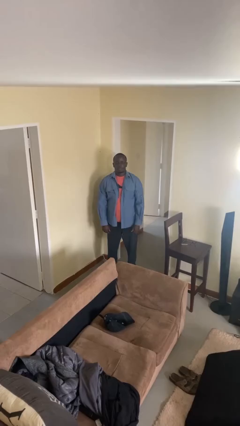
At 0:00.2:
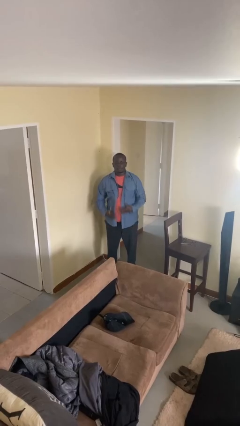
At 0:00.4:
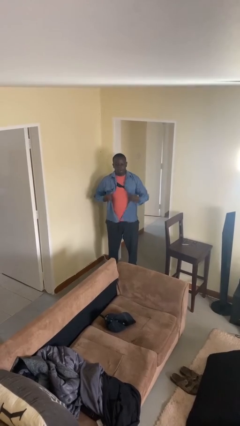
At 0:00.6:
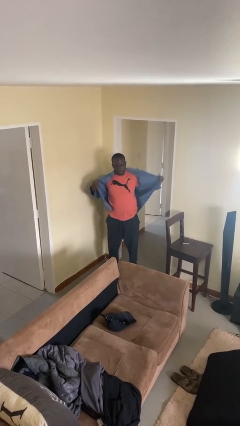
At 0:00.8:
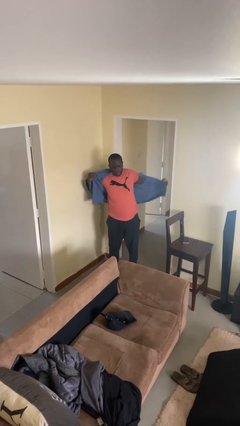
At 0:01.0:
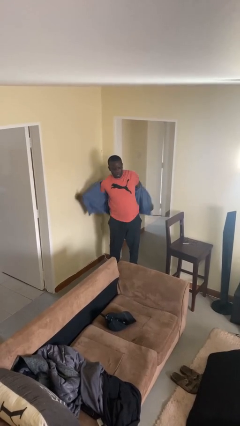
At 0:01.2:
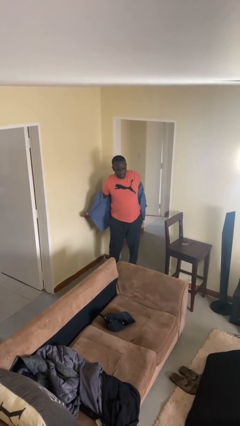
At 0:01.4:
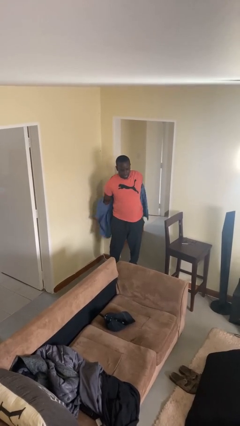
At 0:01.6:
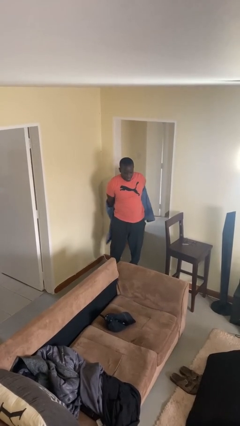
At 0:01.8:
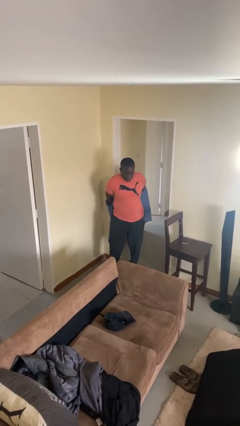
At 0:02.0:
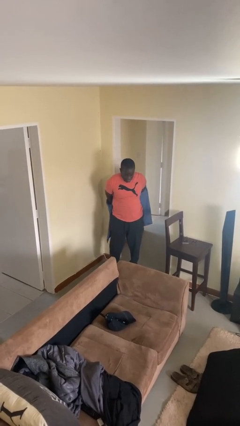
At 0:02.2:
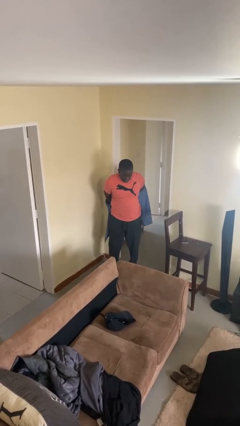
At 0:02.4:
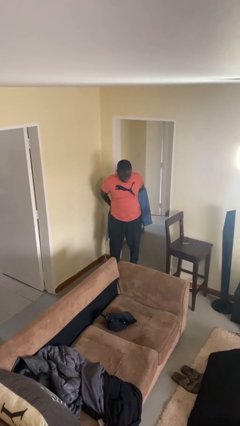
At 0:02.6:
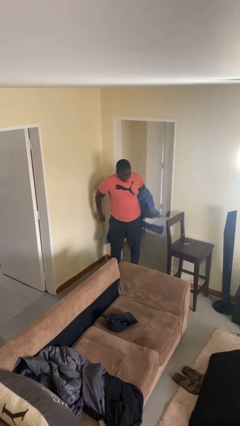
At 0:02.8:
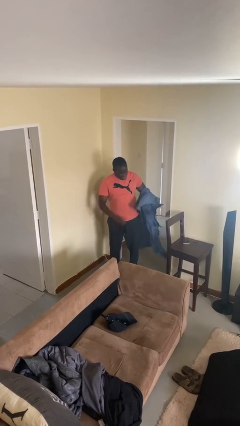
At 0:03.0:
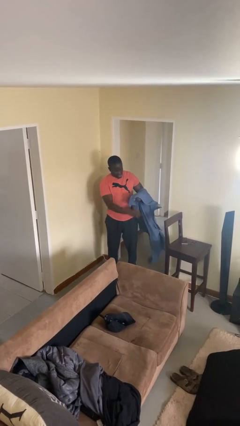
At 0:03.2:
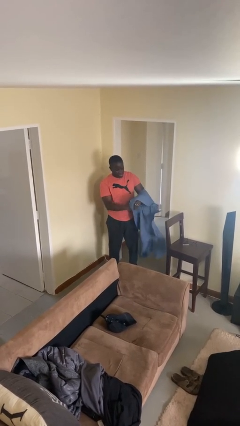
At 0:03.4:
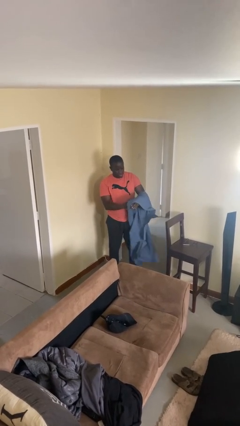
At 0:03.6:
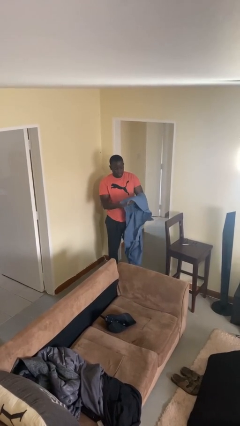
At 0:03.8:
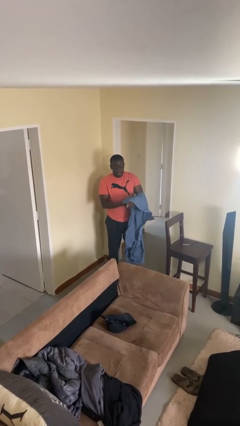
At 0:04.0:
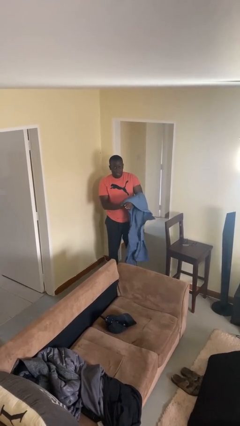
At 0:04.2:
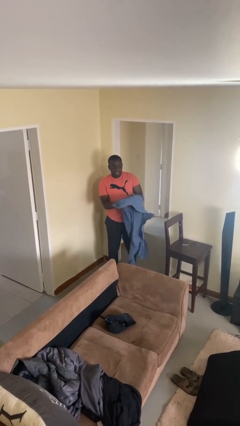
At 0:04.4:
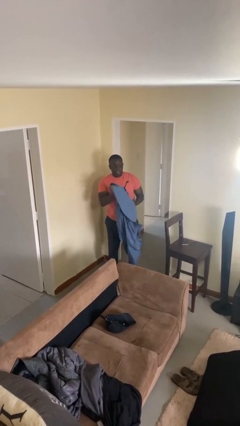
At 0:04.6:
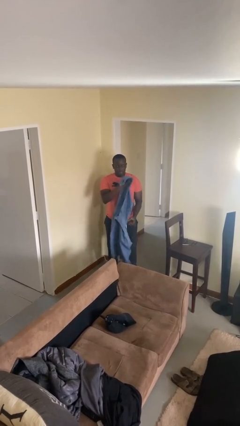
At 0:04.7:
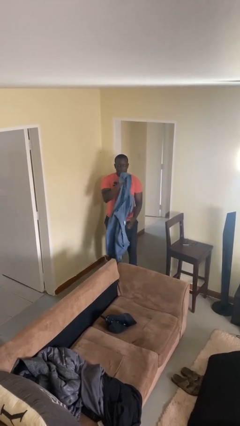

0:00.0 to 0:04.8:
person takes off shirt

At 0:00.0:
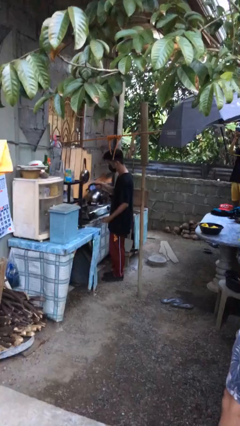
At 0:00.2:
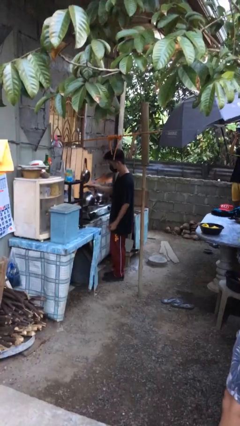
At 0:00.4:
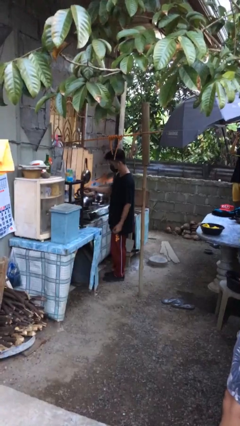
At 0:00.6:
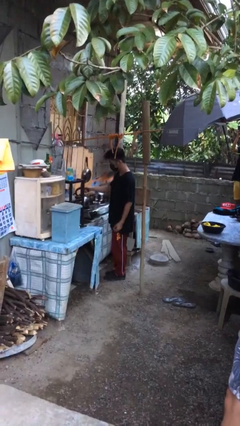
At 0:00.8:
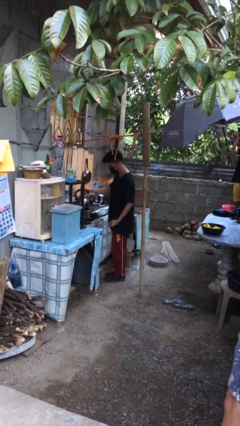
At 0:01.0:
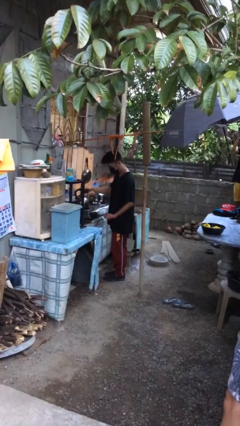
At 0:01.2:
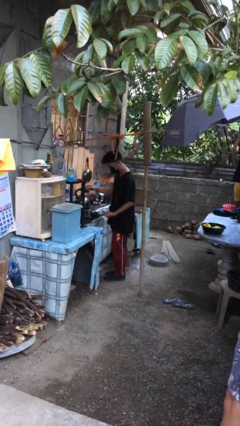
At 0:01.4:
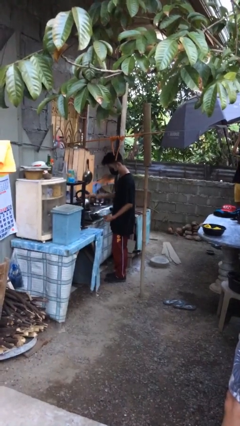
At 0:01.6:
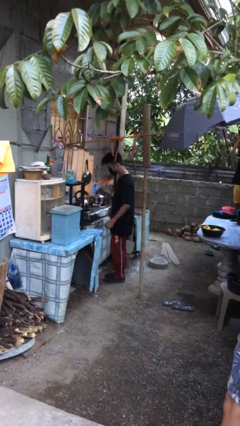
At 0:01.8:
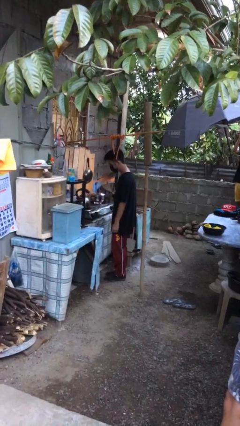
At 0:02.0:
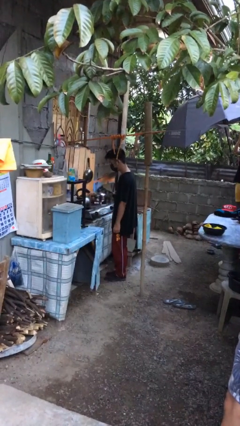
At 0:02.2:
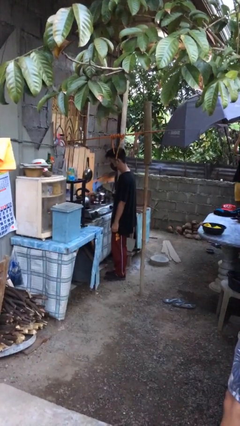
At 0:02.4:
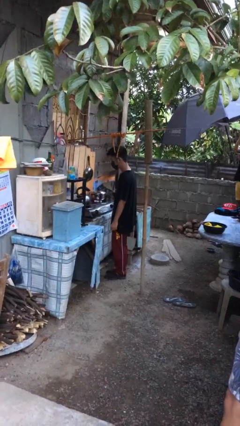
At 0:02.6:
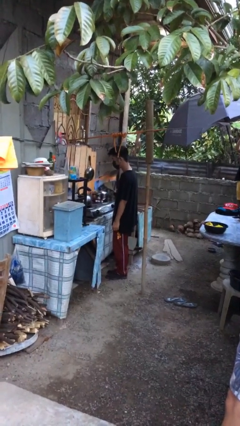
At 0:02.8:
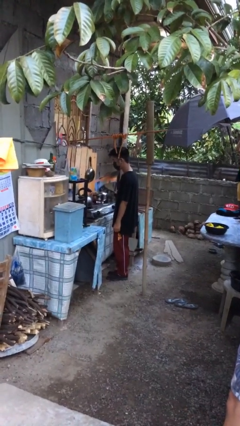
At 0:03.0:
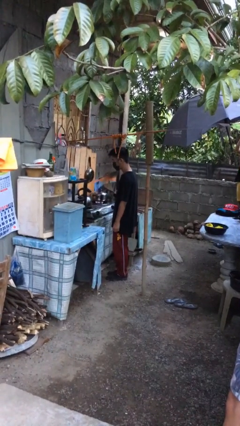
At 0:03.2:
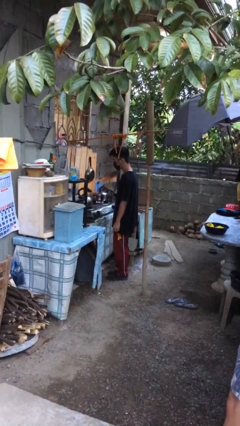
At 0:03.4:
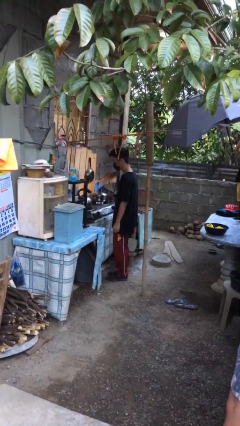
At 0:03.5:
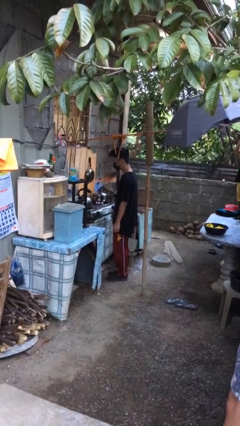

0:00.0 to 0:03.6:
person puts down object on countertop

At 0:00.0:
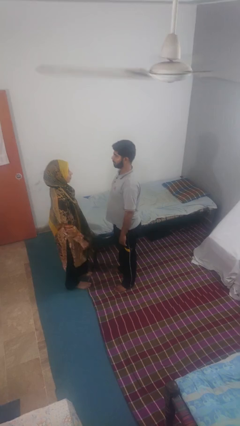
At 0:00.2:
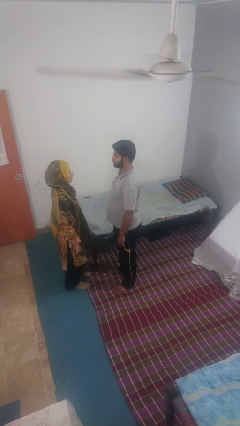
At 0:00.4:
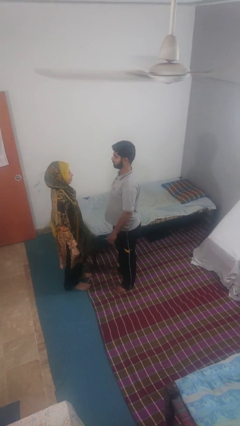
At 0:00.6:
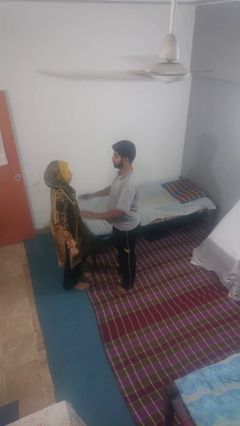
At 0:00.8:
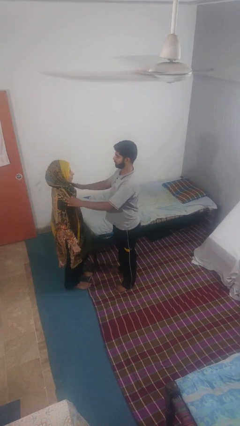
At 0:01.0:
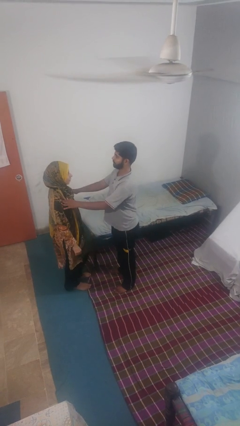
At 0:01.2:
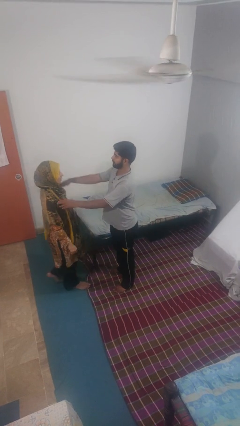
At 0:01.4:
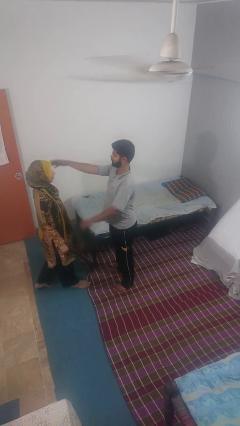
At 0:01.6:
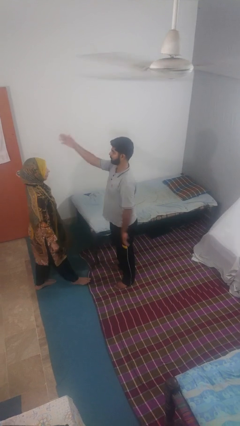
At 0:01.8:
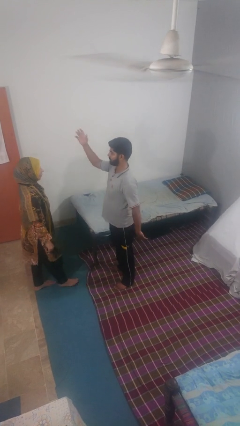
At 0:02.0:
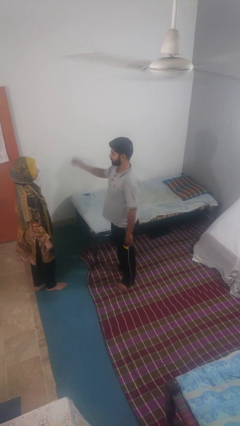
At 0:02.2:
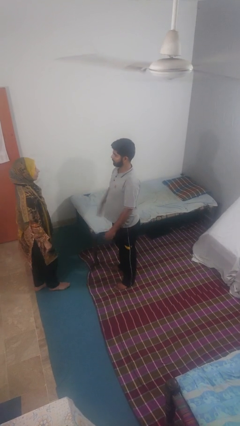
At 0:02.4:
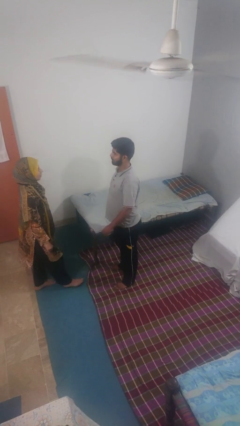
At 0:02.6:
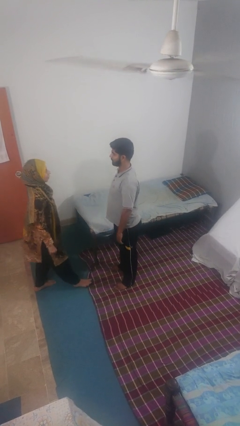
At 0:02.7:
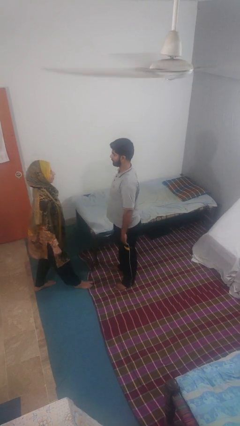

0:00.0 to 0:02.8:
person shoves person

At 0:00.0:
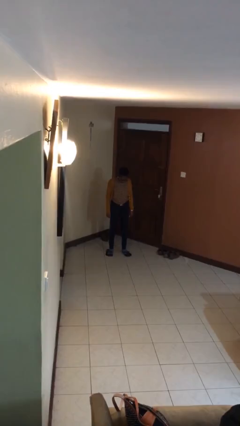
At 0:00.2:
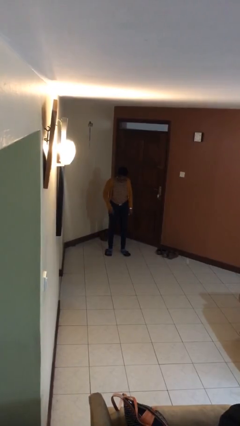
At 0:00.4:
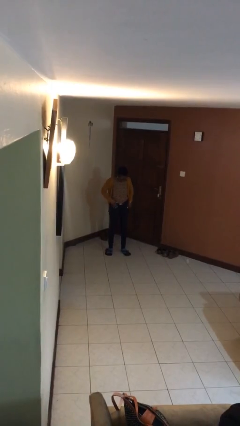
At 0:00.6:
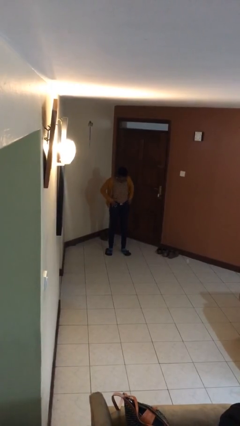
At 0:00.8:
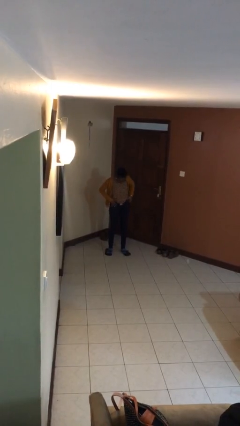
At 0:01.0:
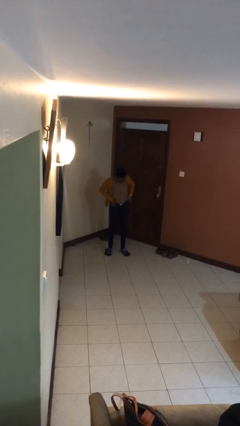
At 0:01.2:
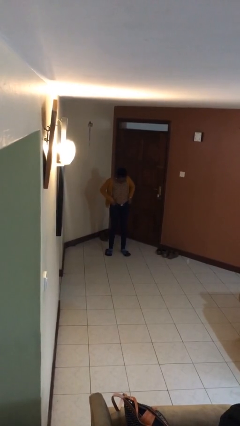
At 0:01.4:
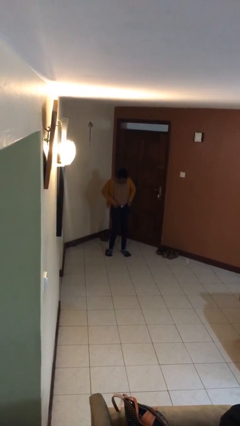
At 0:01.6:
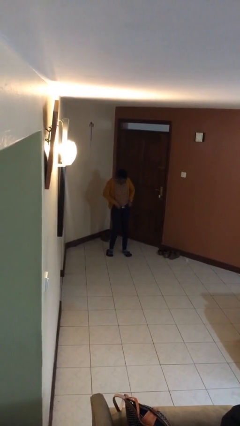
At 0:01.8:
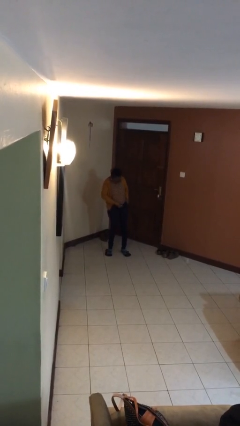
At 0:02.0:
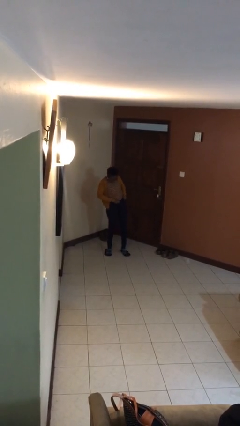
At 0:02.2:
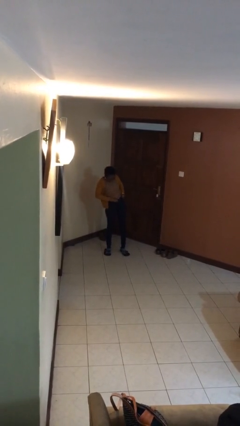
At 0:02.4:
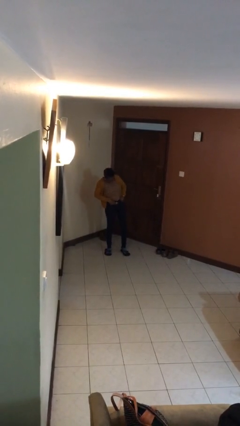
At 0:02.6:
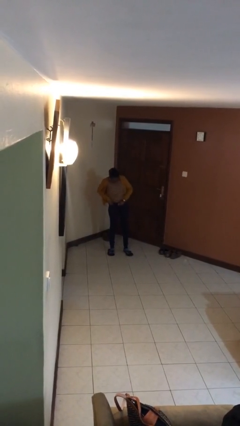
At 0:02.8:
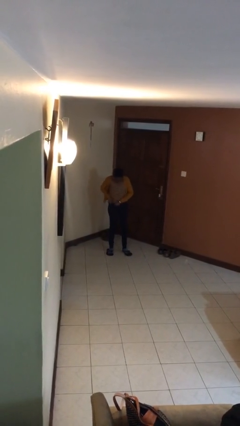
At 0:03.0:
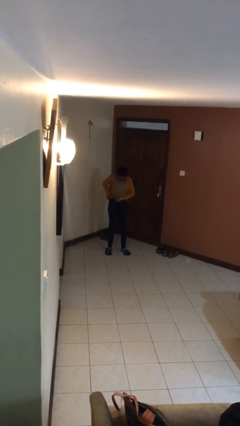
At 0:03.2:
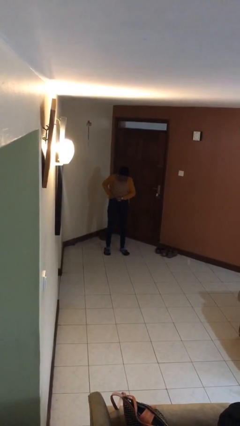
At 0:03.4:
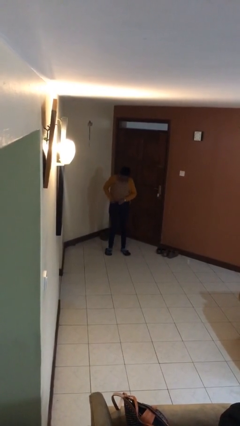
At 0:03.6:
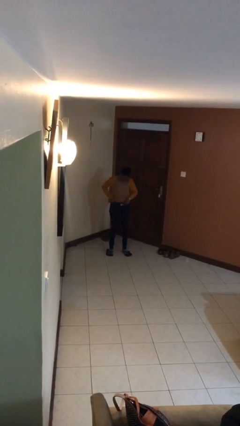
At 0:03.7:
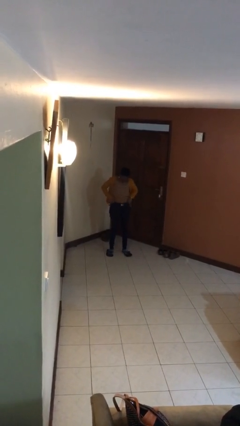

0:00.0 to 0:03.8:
person hikes up pants

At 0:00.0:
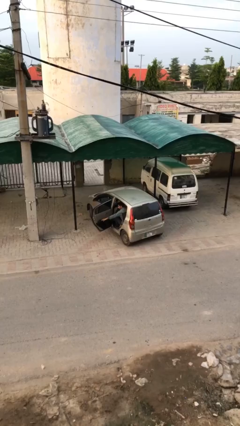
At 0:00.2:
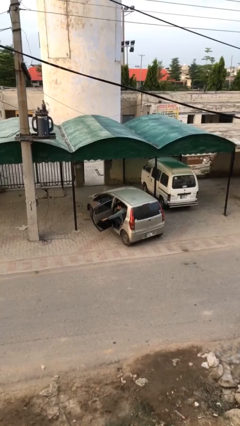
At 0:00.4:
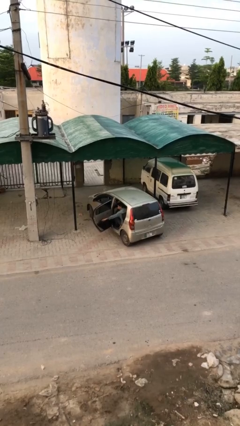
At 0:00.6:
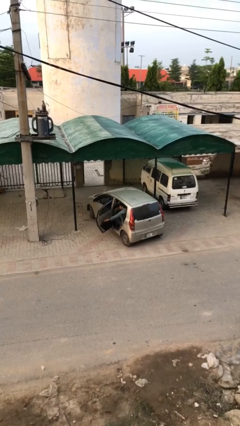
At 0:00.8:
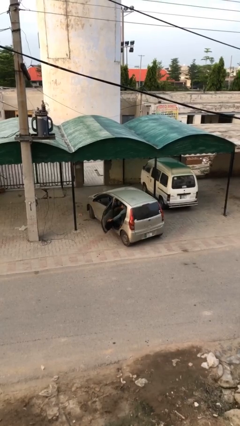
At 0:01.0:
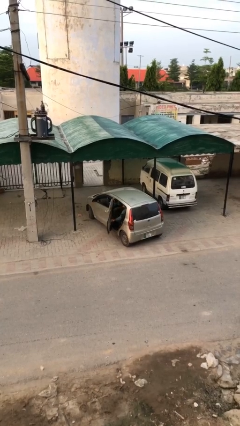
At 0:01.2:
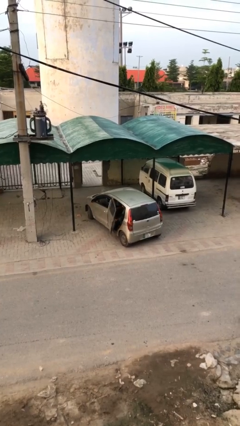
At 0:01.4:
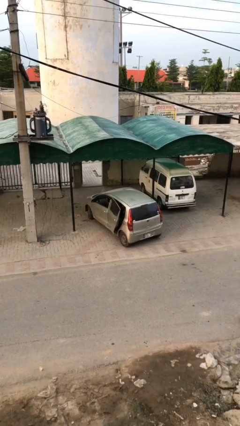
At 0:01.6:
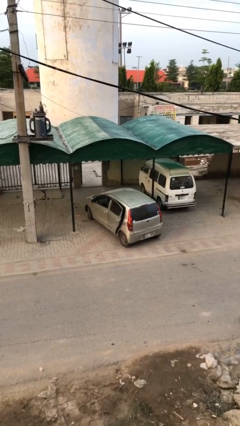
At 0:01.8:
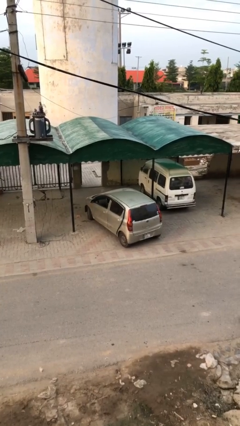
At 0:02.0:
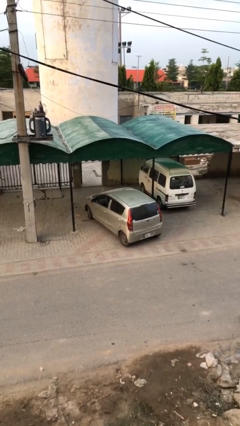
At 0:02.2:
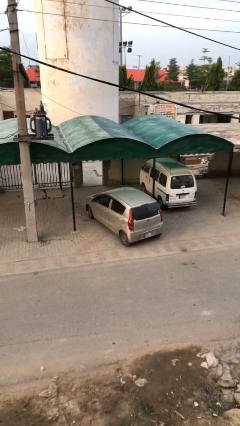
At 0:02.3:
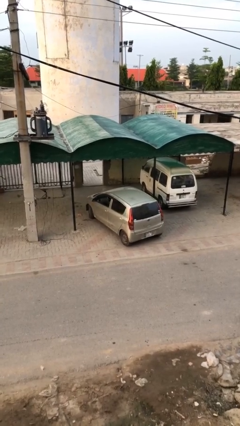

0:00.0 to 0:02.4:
person closes car door
